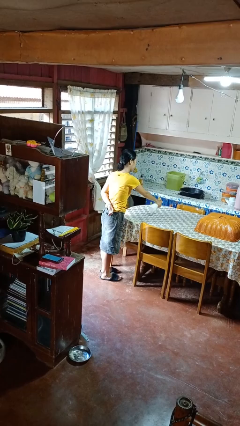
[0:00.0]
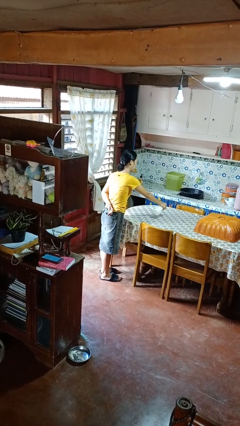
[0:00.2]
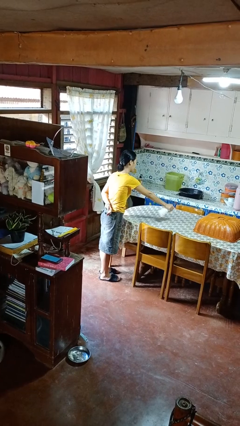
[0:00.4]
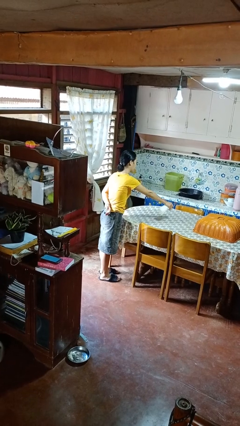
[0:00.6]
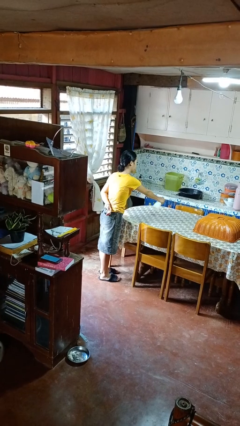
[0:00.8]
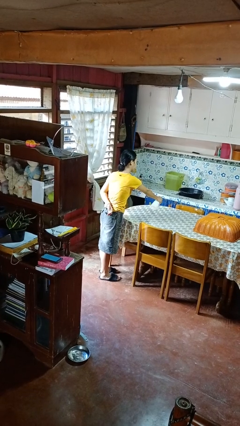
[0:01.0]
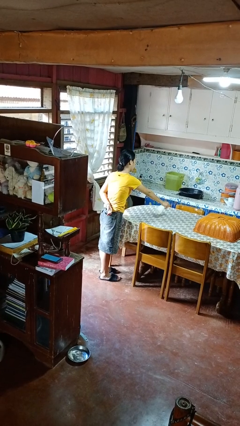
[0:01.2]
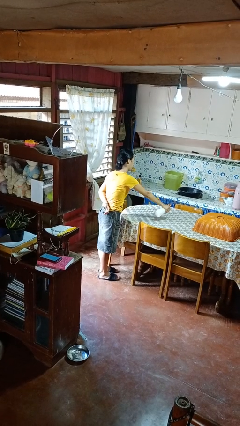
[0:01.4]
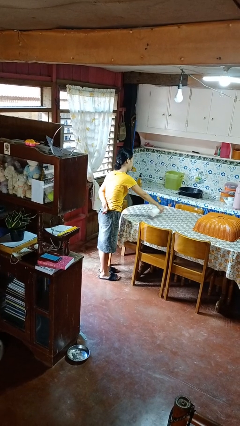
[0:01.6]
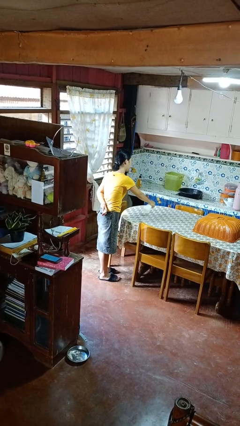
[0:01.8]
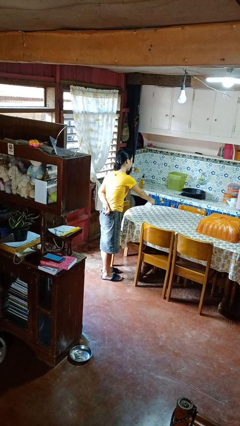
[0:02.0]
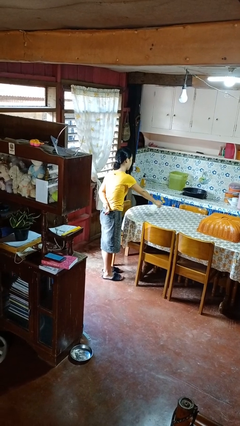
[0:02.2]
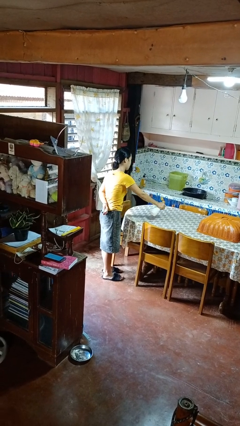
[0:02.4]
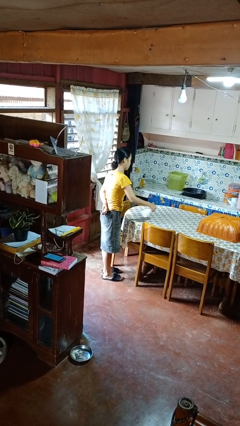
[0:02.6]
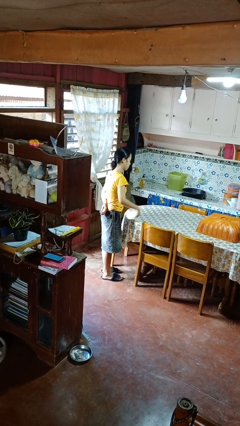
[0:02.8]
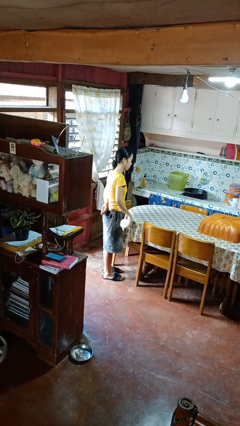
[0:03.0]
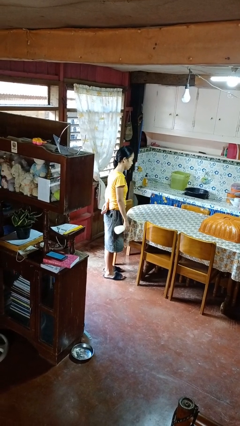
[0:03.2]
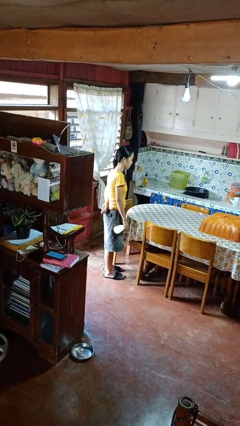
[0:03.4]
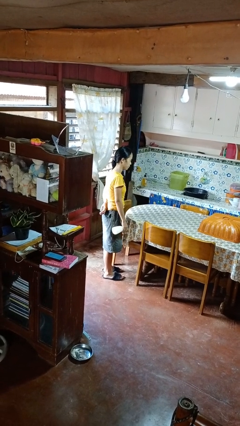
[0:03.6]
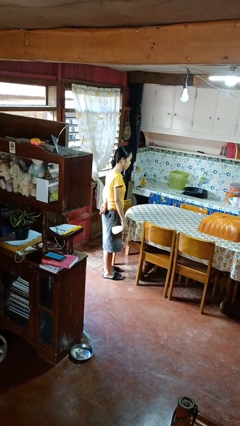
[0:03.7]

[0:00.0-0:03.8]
person sprays from bottle

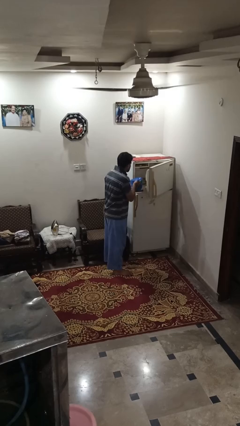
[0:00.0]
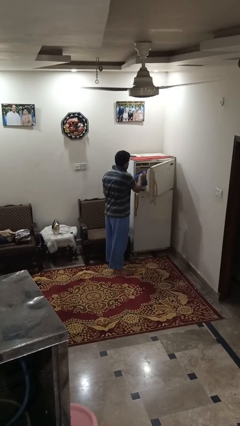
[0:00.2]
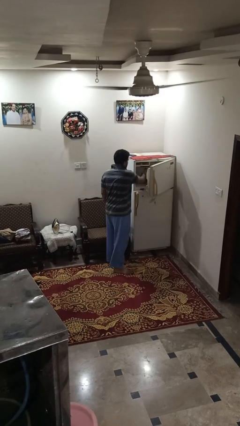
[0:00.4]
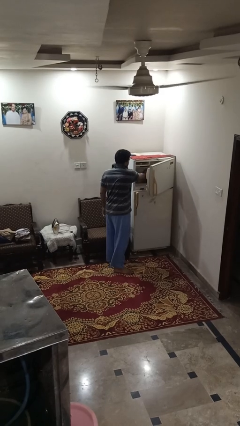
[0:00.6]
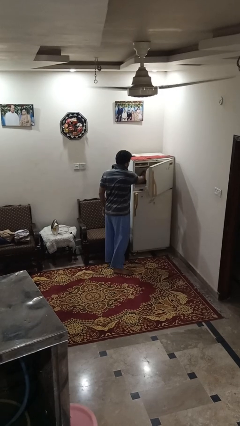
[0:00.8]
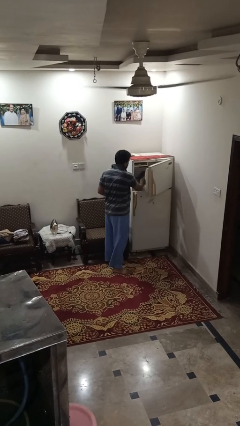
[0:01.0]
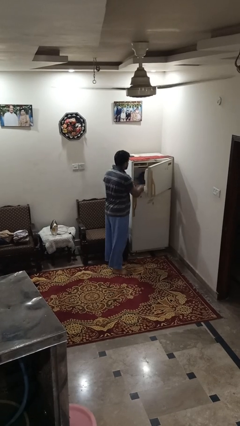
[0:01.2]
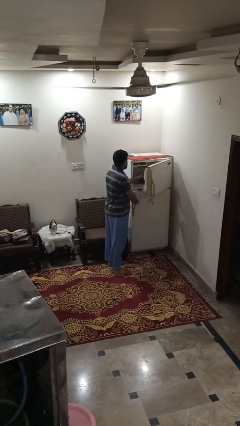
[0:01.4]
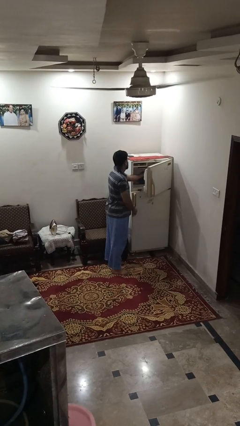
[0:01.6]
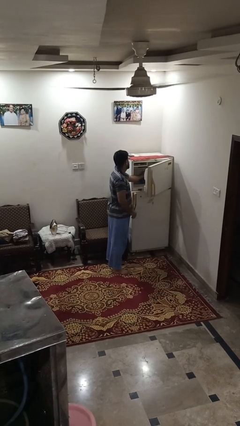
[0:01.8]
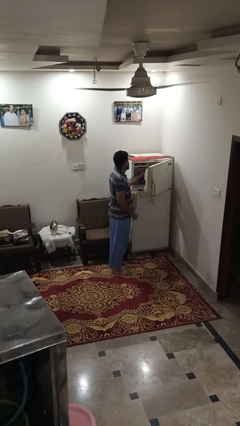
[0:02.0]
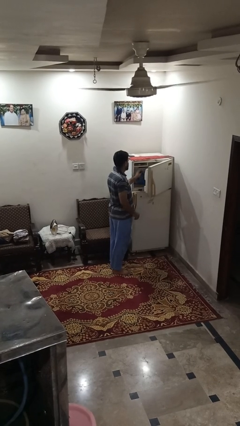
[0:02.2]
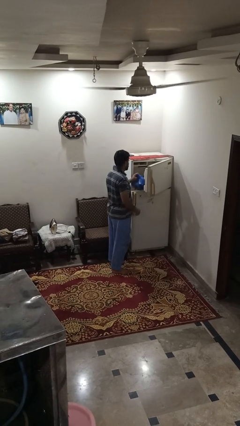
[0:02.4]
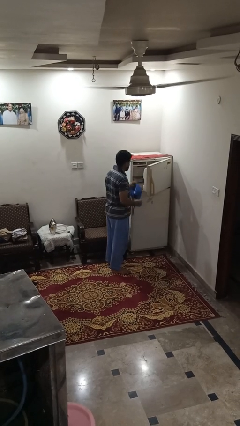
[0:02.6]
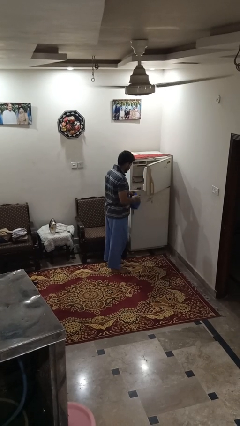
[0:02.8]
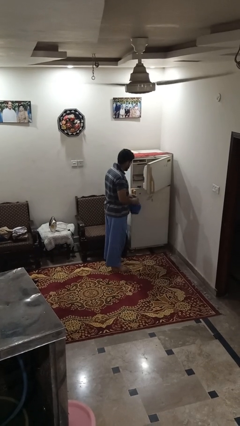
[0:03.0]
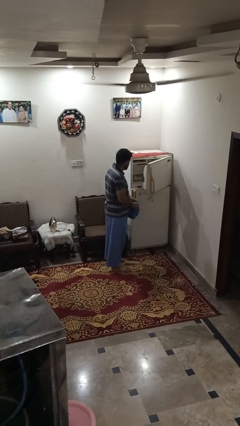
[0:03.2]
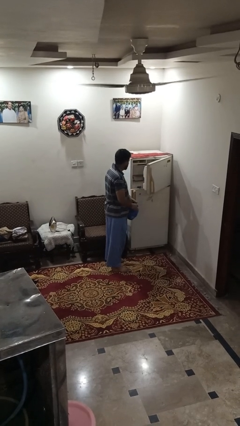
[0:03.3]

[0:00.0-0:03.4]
person loads groceries into refrigerator

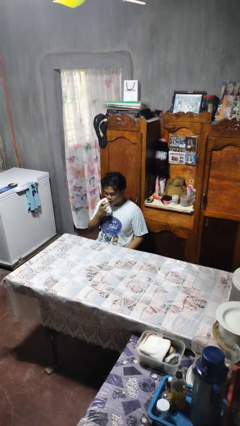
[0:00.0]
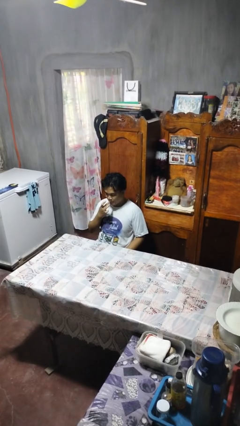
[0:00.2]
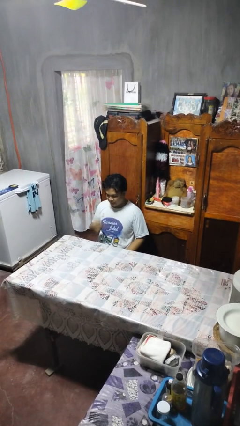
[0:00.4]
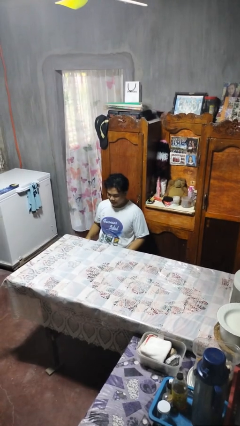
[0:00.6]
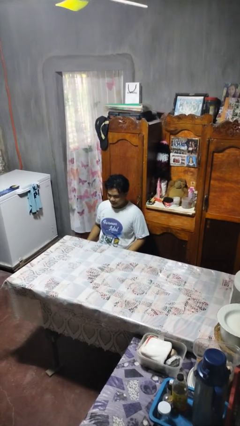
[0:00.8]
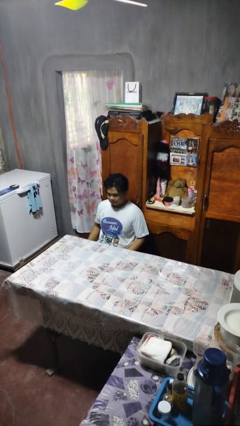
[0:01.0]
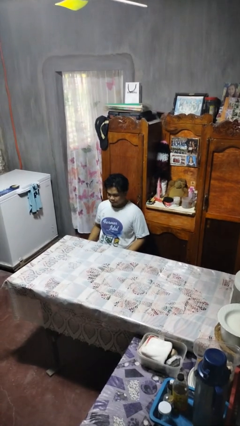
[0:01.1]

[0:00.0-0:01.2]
person licks fingers

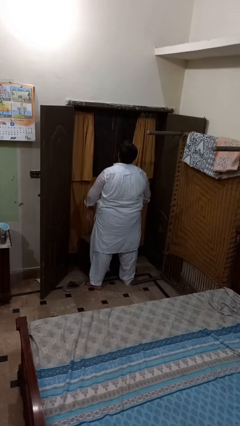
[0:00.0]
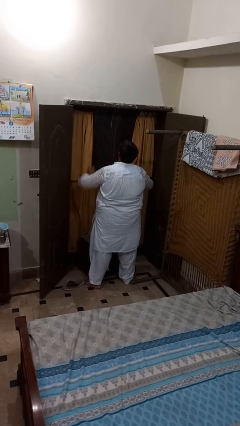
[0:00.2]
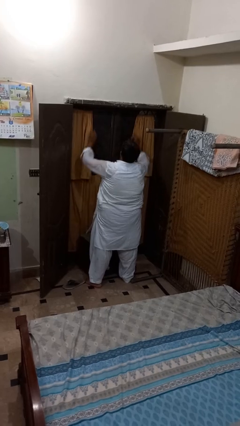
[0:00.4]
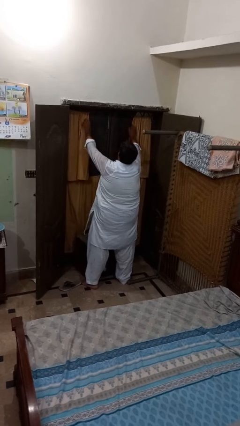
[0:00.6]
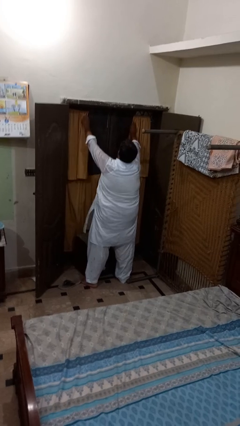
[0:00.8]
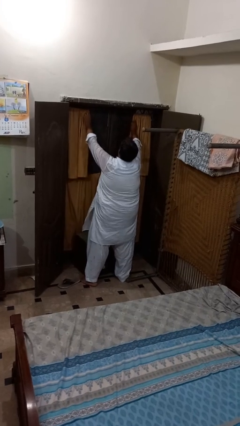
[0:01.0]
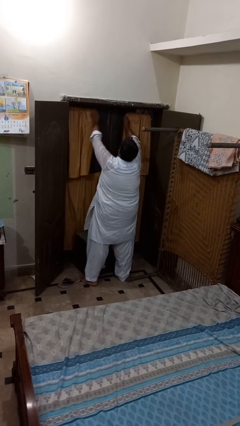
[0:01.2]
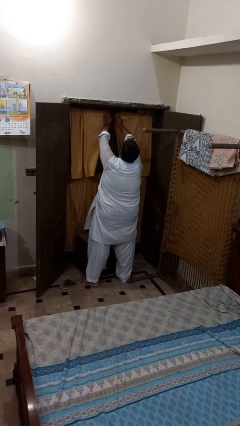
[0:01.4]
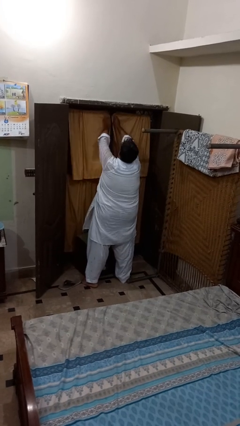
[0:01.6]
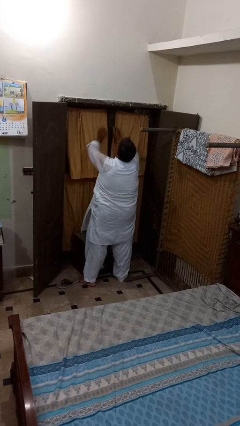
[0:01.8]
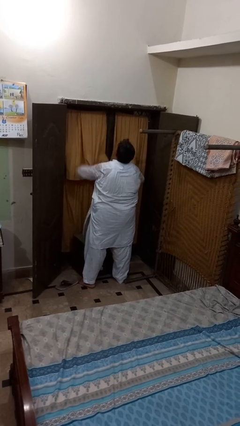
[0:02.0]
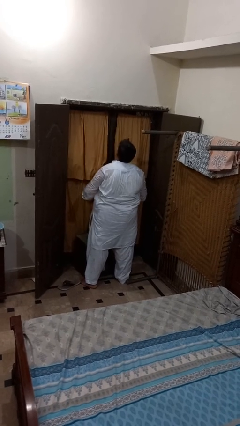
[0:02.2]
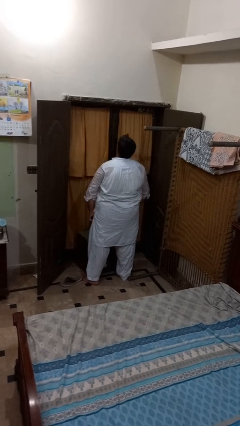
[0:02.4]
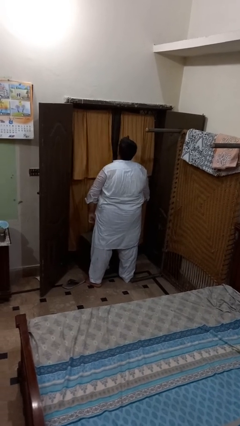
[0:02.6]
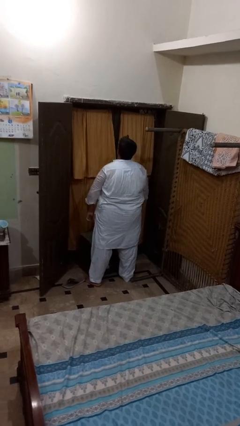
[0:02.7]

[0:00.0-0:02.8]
person closes curtains

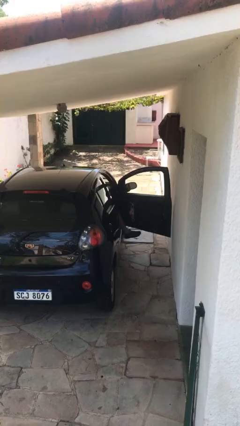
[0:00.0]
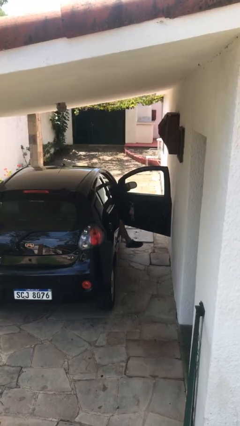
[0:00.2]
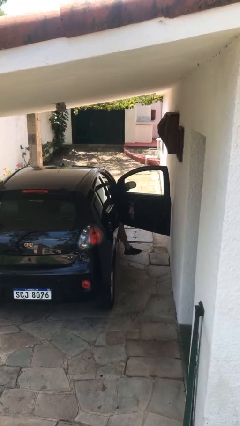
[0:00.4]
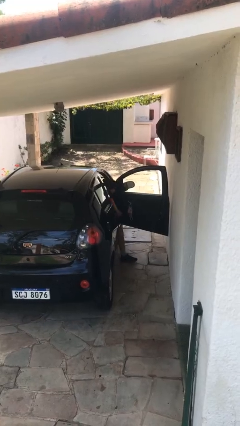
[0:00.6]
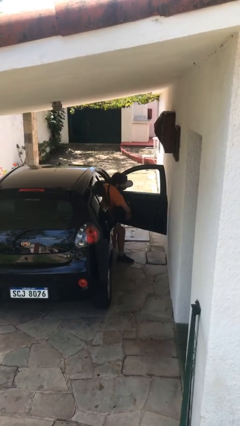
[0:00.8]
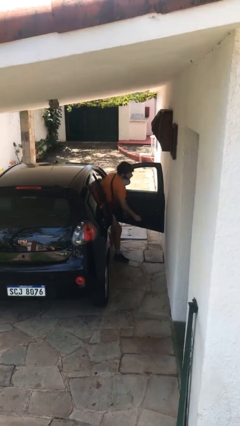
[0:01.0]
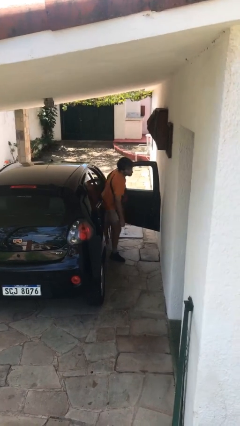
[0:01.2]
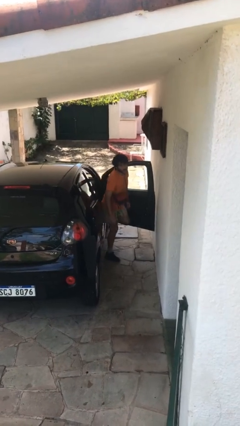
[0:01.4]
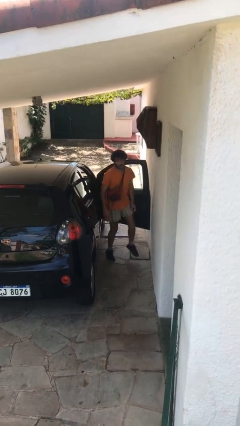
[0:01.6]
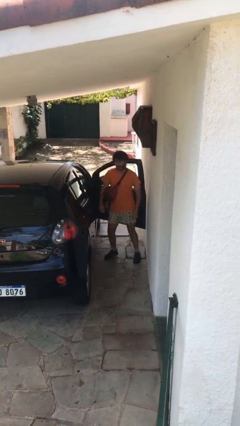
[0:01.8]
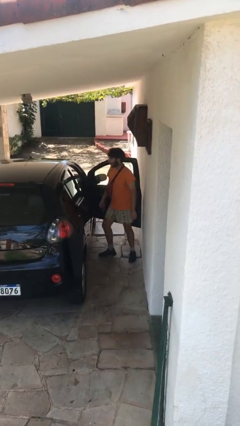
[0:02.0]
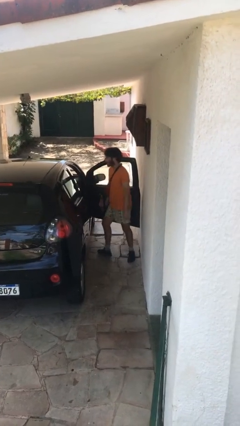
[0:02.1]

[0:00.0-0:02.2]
person exits car

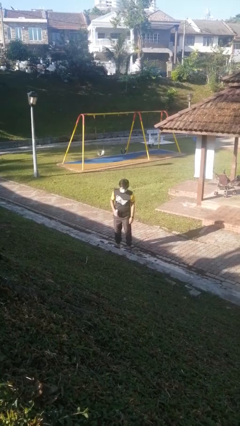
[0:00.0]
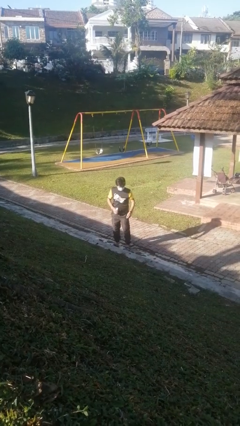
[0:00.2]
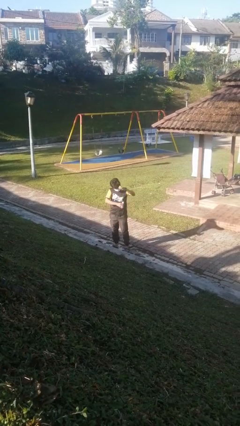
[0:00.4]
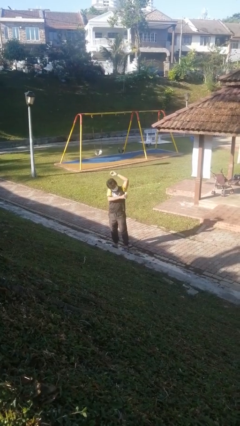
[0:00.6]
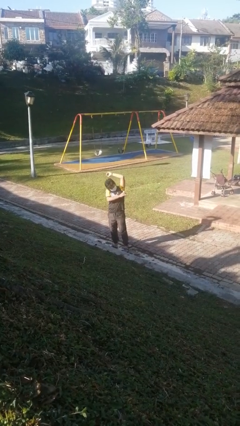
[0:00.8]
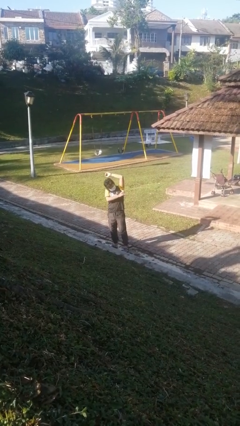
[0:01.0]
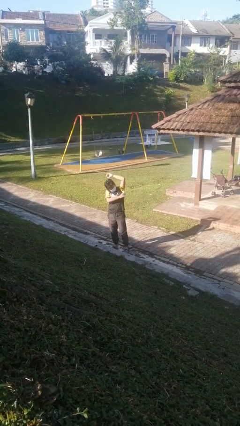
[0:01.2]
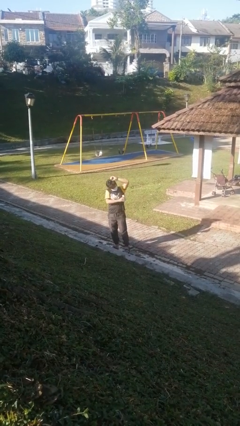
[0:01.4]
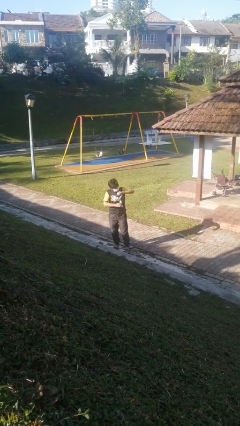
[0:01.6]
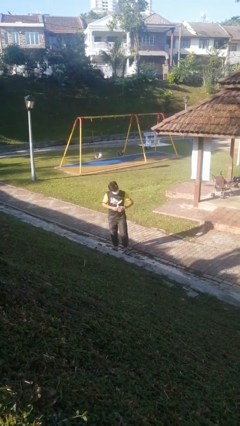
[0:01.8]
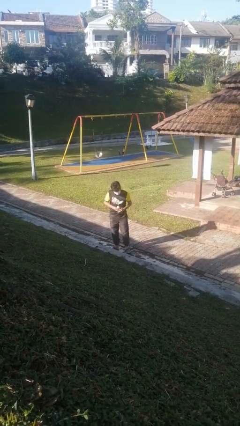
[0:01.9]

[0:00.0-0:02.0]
person applies deodorant

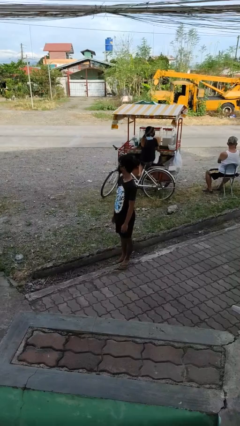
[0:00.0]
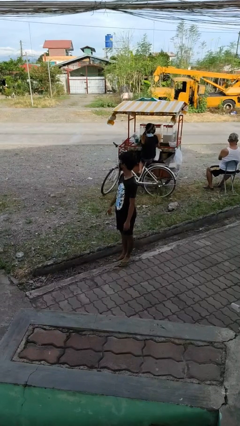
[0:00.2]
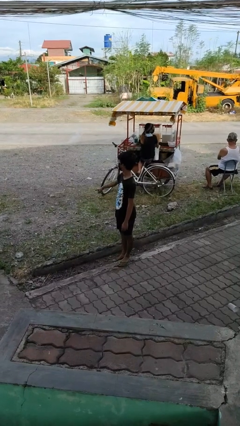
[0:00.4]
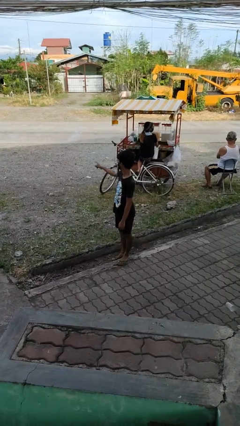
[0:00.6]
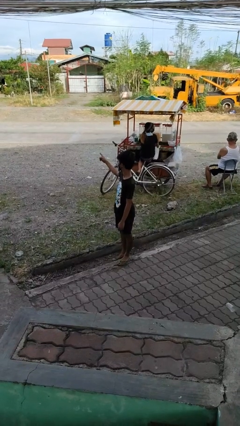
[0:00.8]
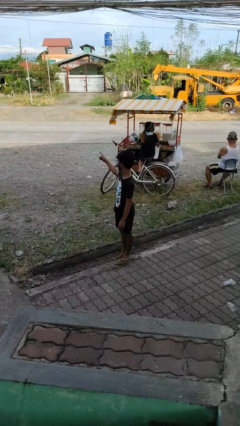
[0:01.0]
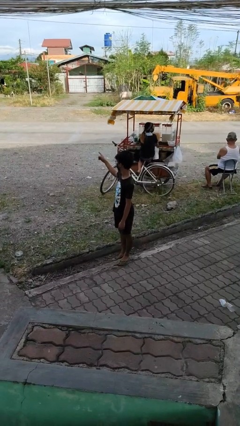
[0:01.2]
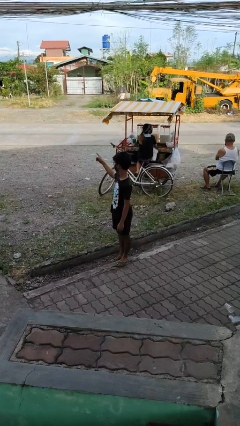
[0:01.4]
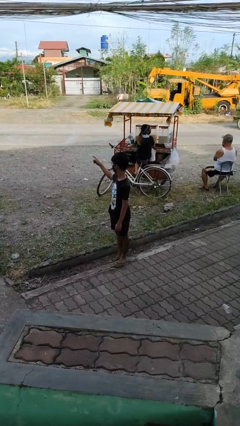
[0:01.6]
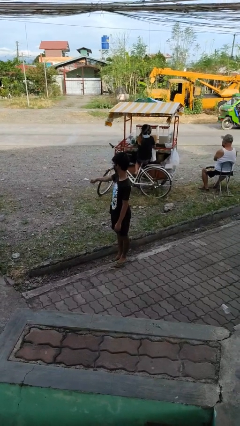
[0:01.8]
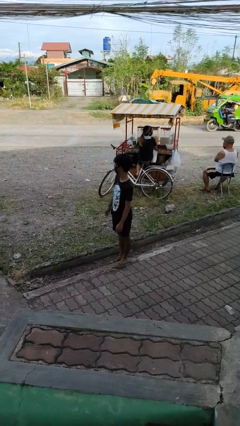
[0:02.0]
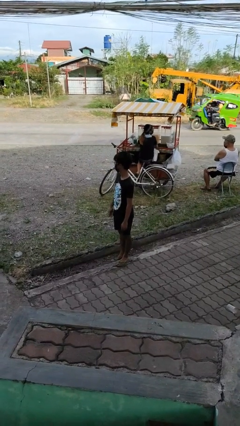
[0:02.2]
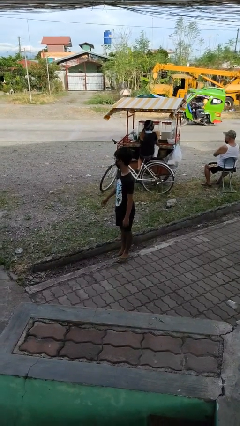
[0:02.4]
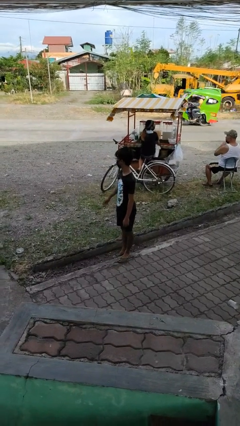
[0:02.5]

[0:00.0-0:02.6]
person points at person
